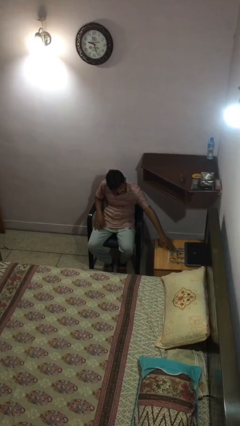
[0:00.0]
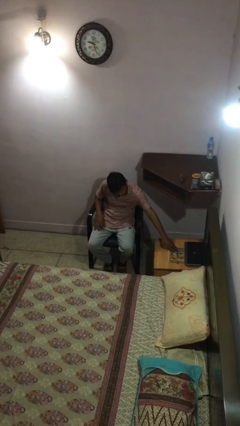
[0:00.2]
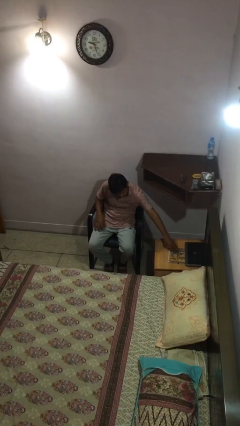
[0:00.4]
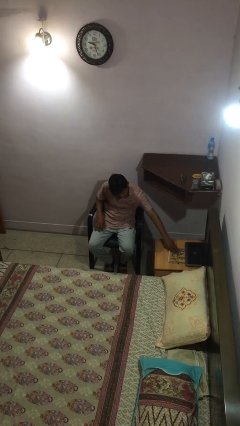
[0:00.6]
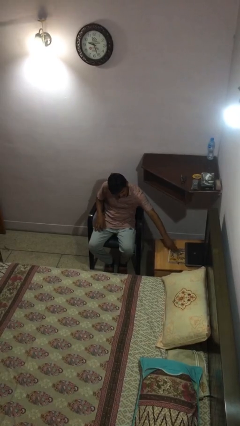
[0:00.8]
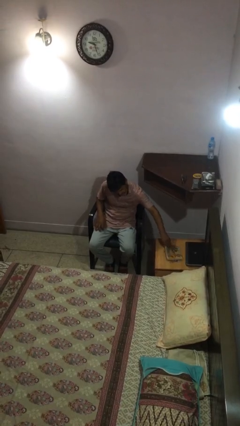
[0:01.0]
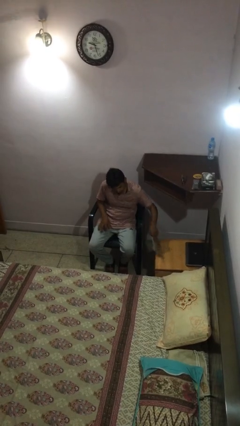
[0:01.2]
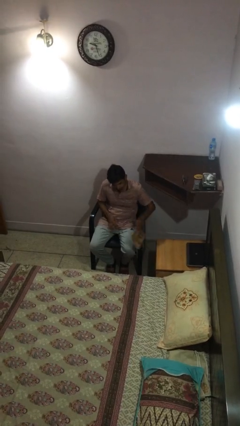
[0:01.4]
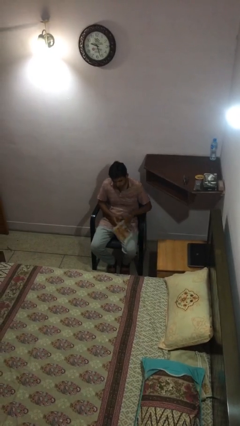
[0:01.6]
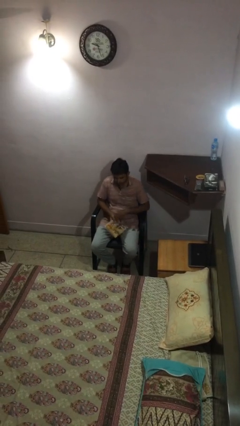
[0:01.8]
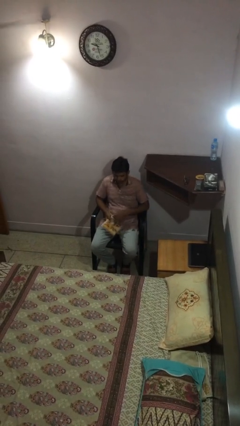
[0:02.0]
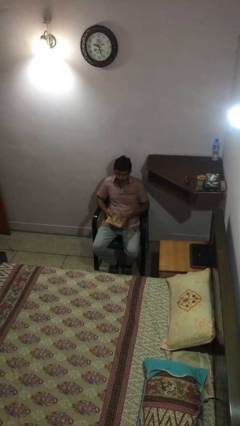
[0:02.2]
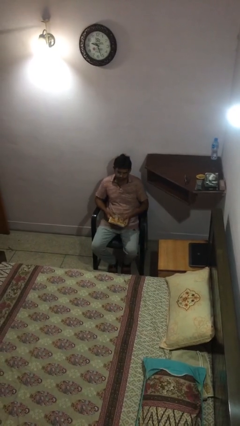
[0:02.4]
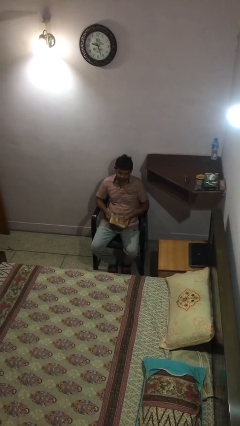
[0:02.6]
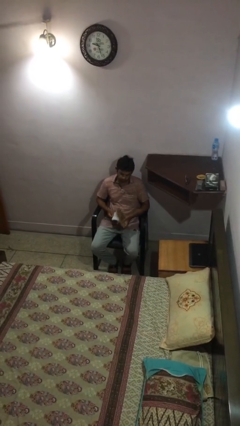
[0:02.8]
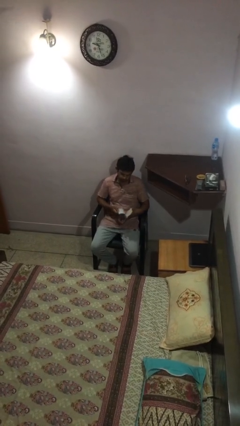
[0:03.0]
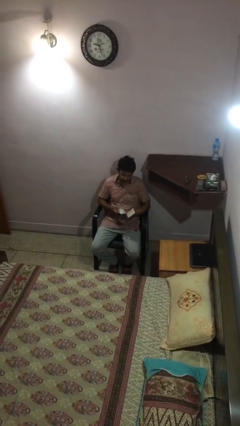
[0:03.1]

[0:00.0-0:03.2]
person picks up object from table

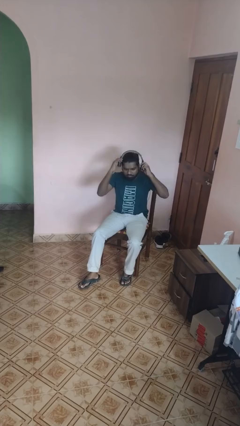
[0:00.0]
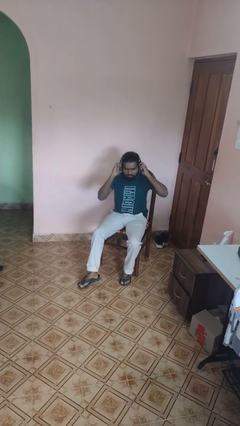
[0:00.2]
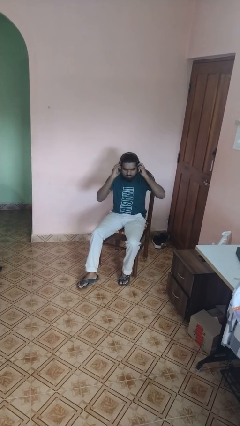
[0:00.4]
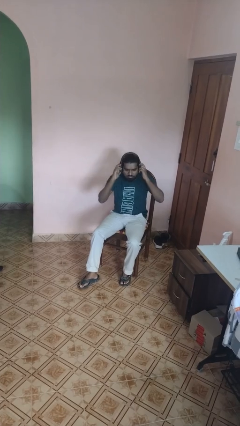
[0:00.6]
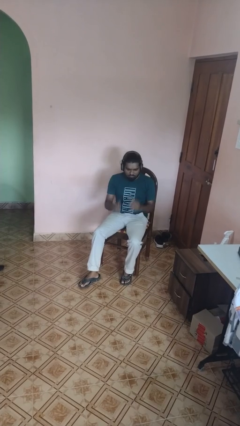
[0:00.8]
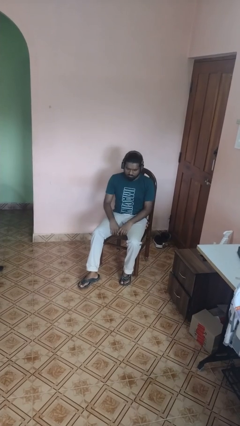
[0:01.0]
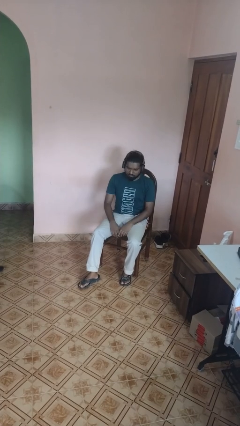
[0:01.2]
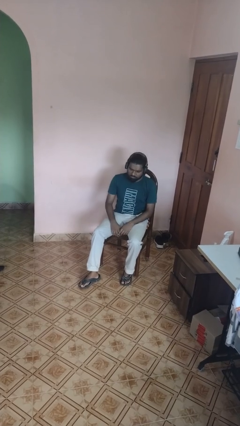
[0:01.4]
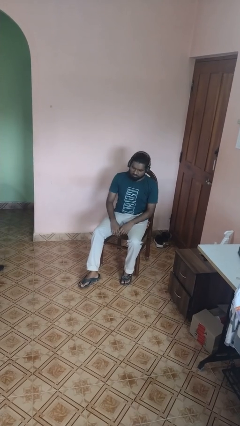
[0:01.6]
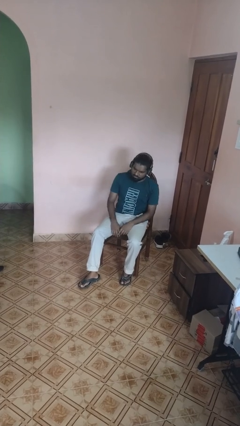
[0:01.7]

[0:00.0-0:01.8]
person puts on headphones

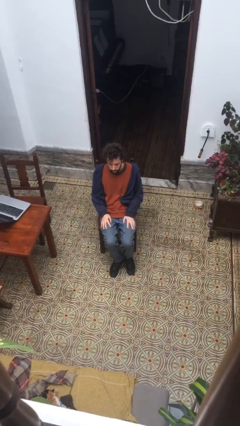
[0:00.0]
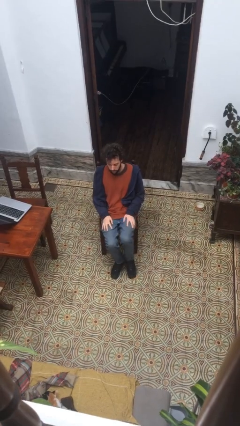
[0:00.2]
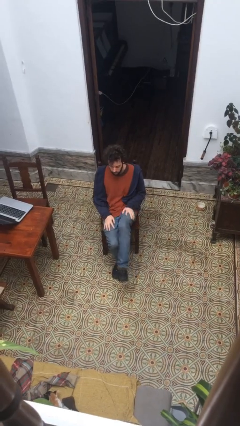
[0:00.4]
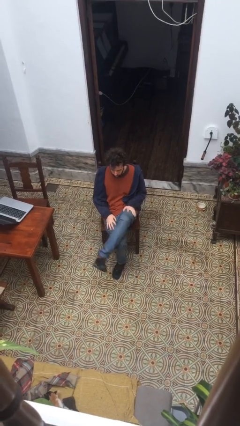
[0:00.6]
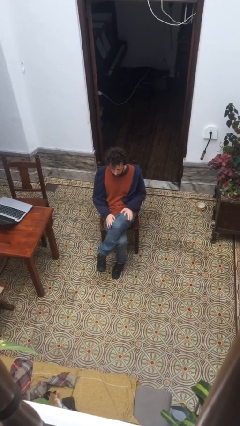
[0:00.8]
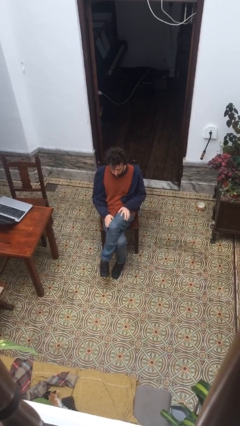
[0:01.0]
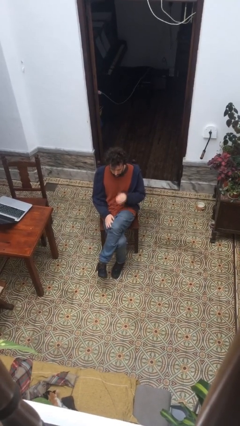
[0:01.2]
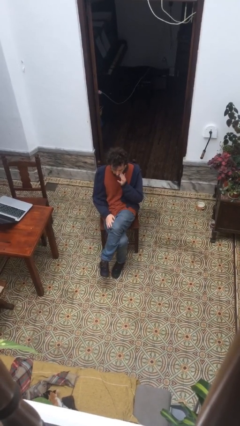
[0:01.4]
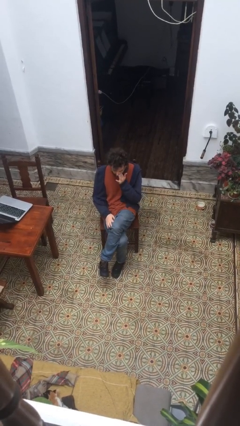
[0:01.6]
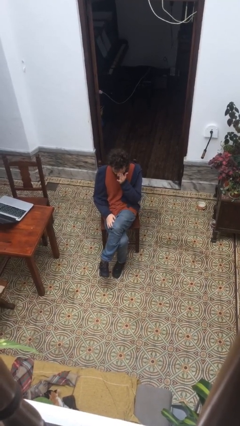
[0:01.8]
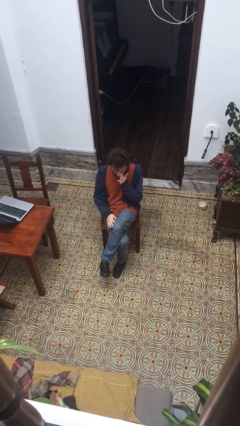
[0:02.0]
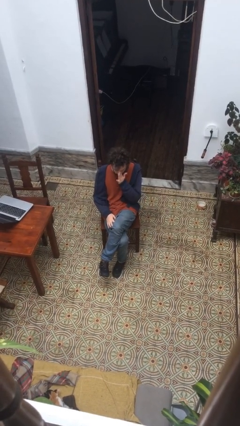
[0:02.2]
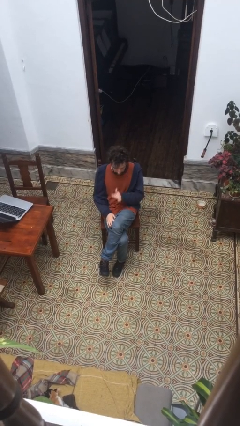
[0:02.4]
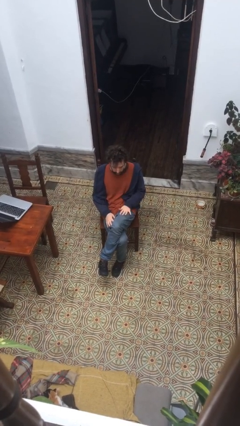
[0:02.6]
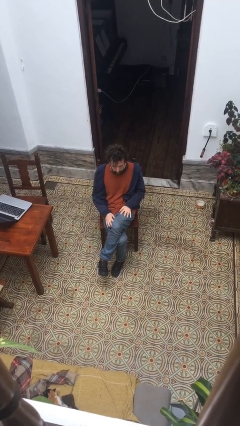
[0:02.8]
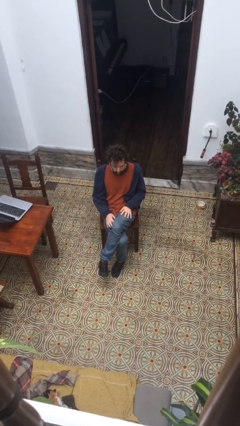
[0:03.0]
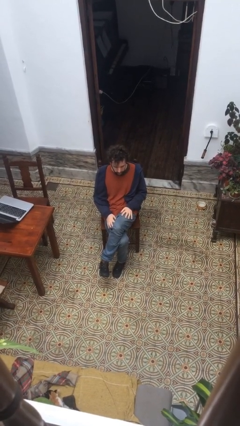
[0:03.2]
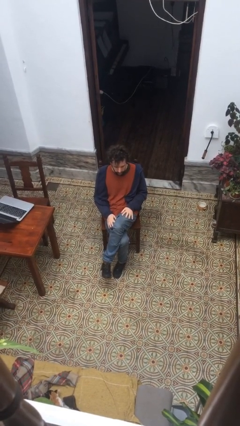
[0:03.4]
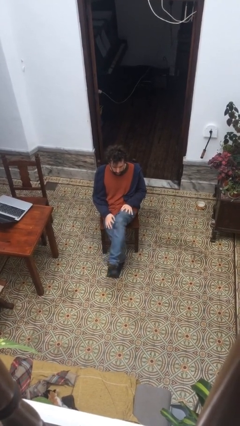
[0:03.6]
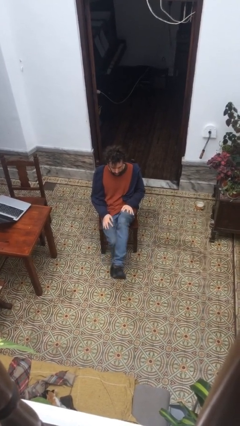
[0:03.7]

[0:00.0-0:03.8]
person crosses legs

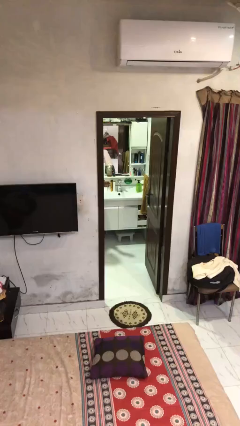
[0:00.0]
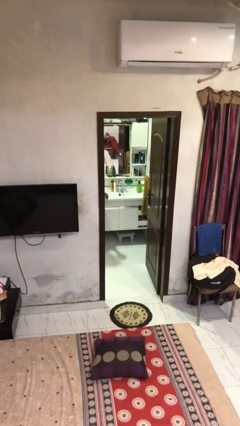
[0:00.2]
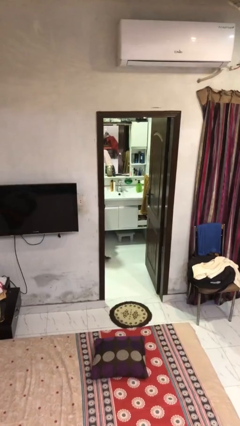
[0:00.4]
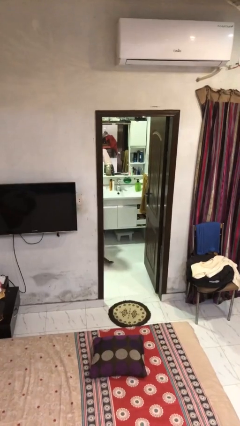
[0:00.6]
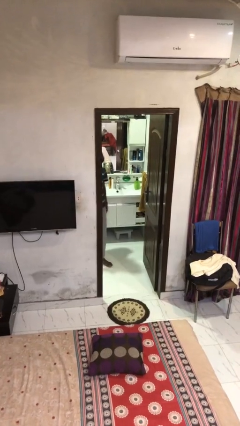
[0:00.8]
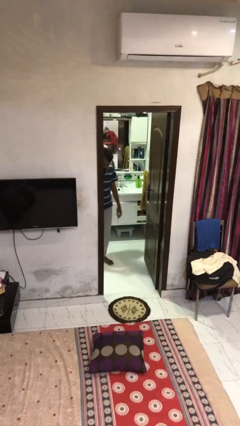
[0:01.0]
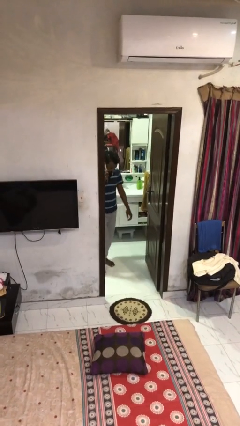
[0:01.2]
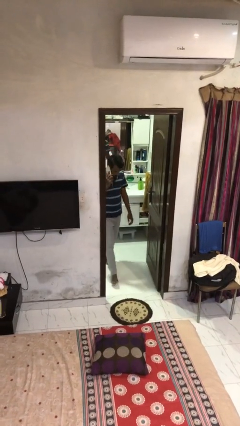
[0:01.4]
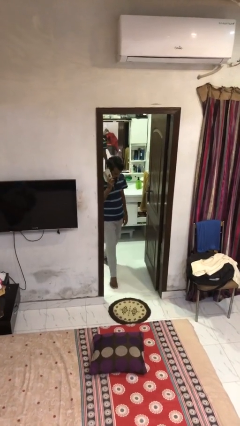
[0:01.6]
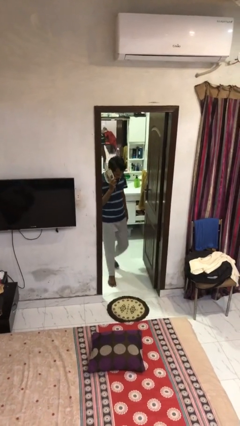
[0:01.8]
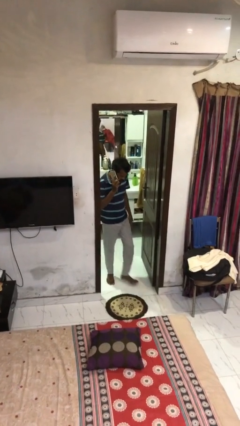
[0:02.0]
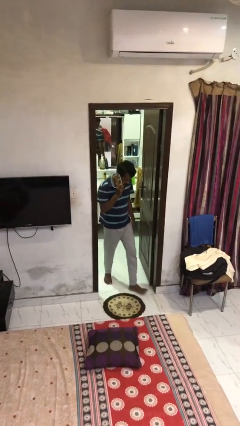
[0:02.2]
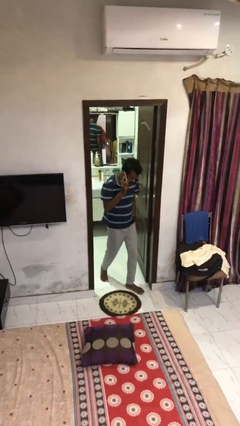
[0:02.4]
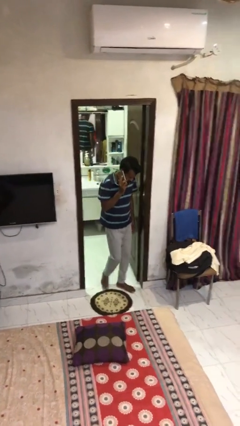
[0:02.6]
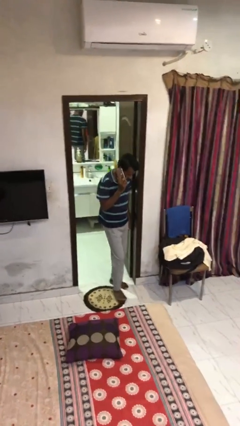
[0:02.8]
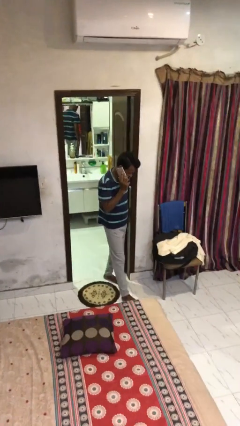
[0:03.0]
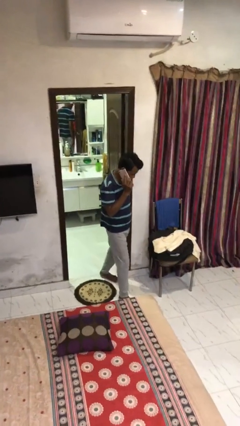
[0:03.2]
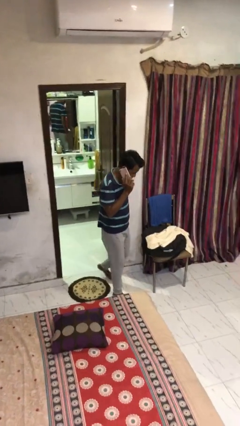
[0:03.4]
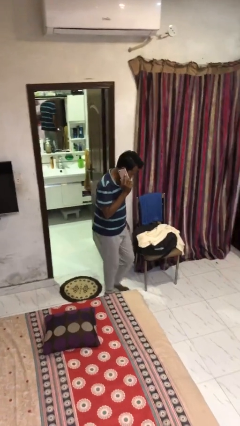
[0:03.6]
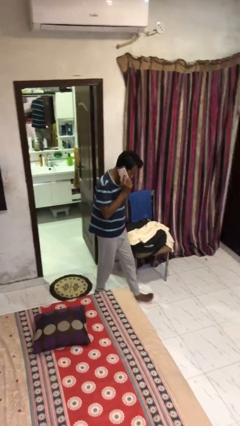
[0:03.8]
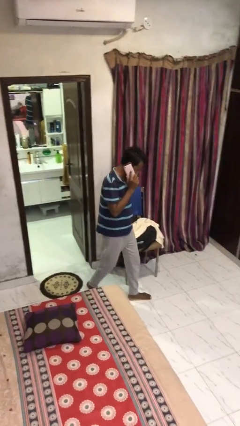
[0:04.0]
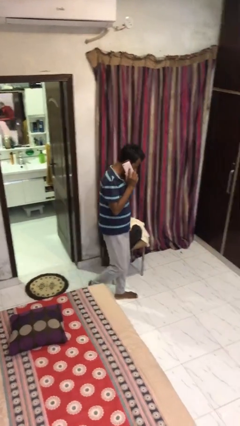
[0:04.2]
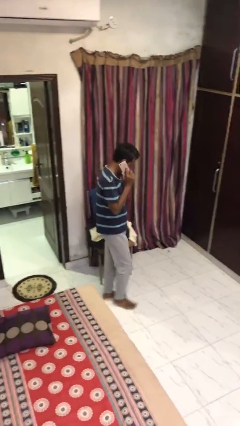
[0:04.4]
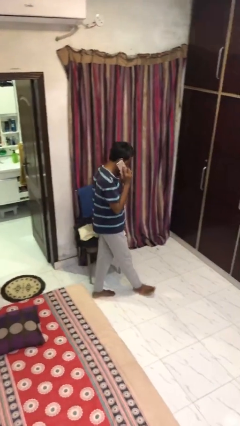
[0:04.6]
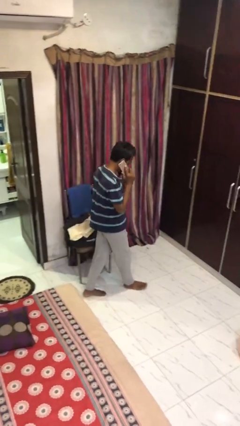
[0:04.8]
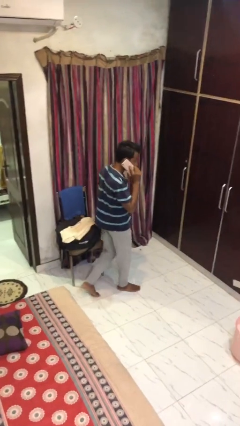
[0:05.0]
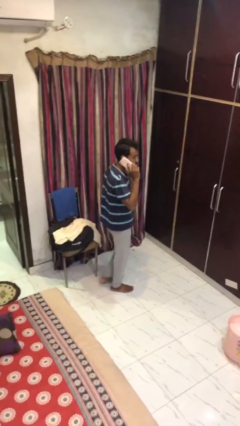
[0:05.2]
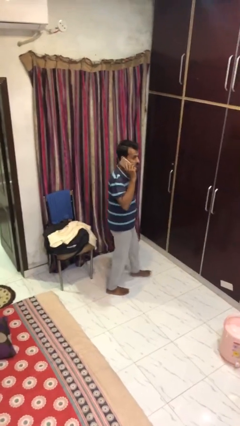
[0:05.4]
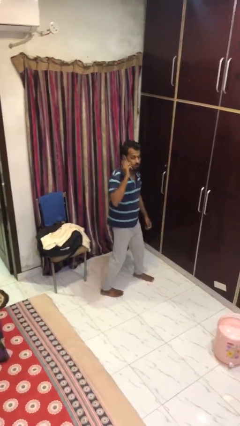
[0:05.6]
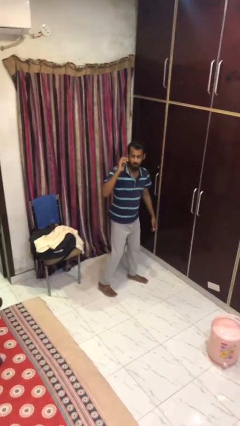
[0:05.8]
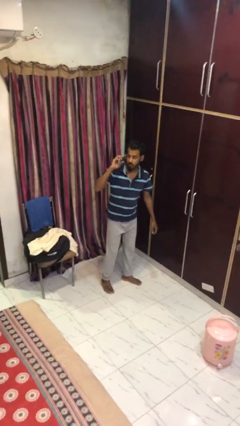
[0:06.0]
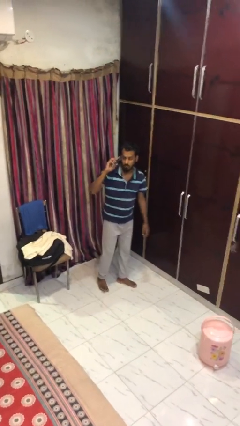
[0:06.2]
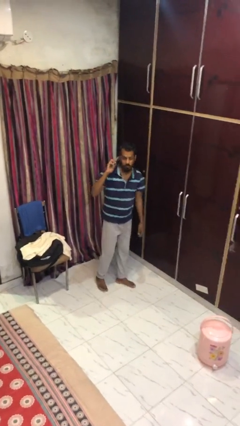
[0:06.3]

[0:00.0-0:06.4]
person enters scene through structure

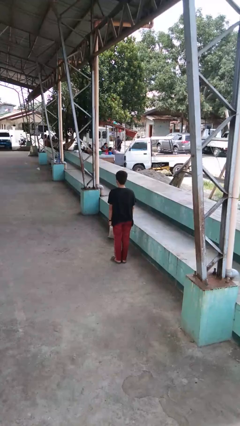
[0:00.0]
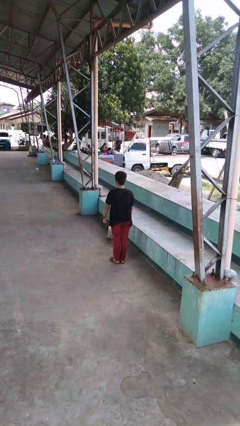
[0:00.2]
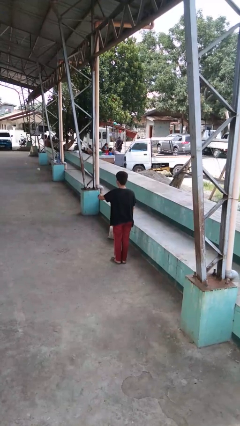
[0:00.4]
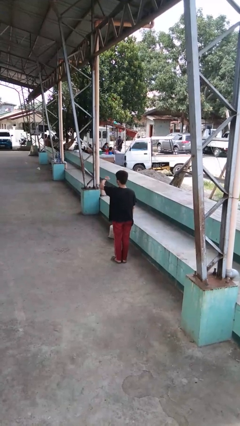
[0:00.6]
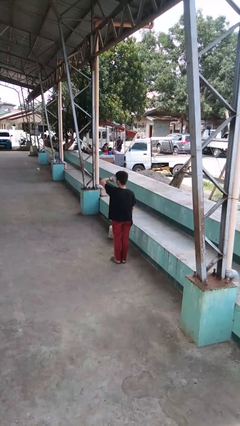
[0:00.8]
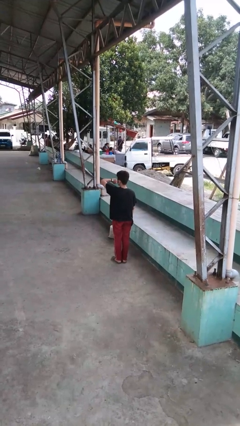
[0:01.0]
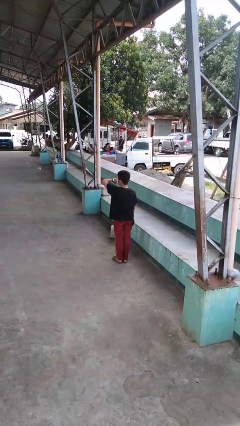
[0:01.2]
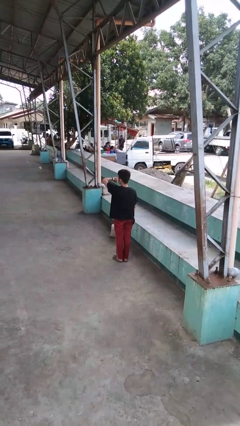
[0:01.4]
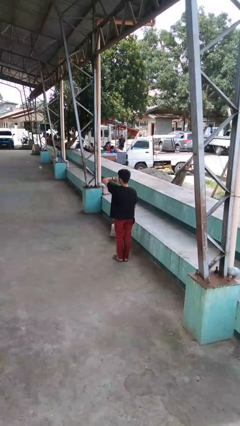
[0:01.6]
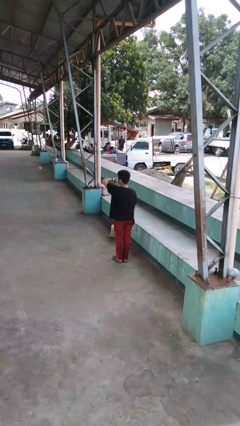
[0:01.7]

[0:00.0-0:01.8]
person looks at wristwatch

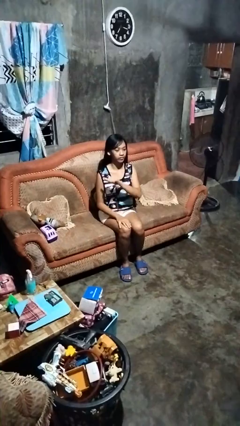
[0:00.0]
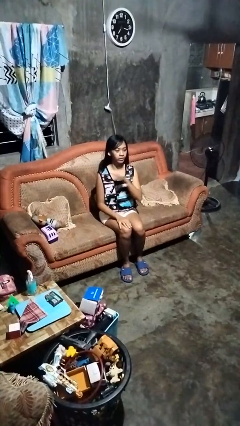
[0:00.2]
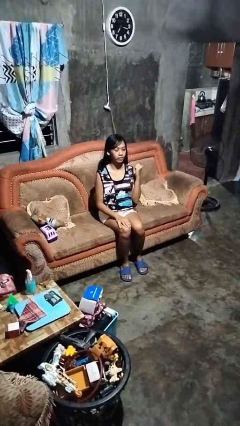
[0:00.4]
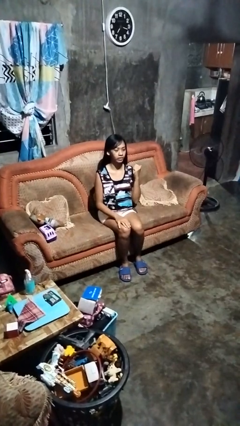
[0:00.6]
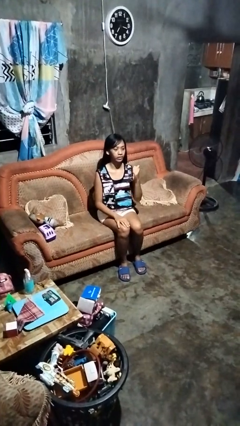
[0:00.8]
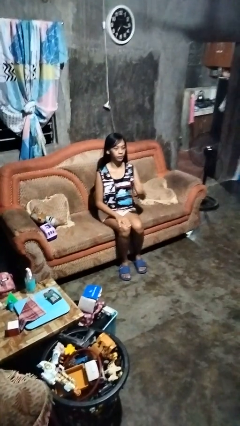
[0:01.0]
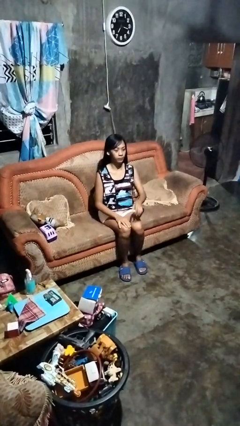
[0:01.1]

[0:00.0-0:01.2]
person pats head
